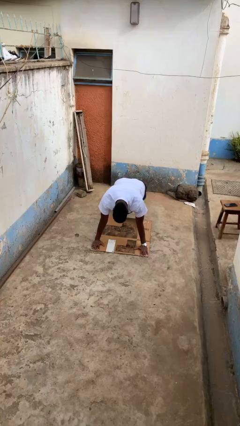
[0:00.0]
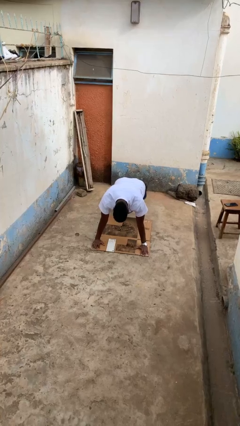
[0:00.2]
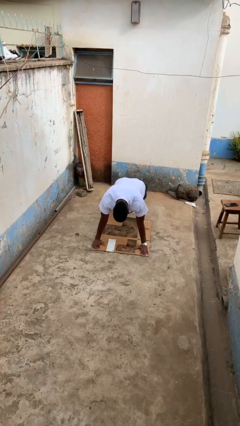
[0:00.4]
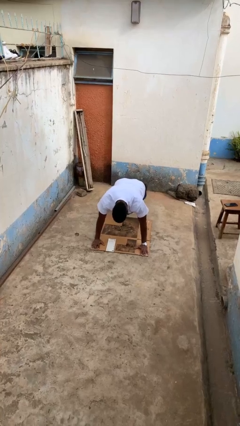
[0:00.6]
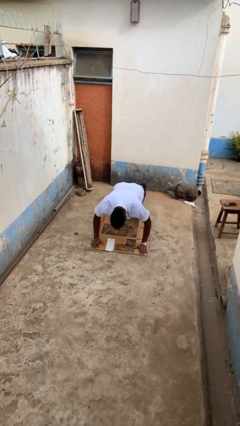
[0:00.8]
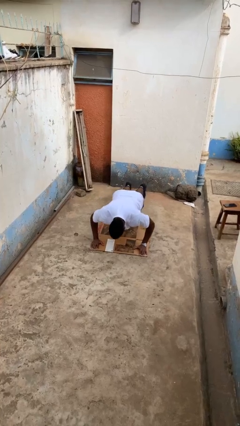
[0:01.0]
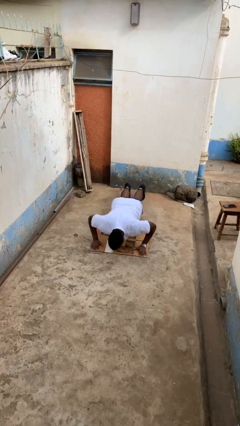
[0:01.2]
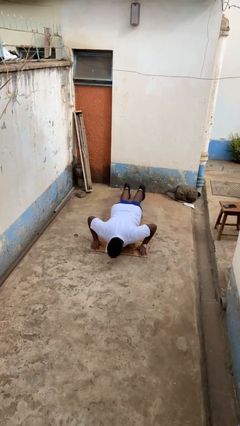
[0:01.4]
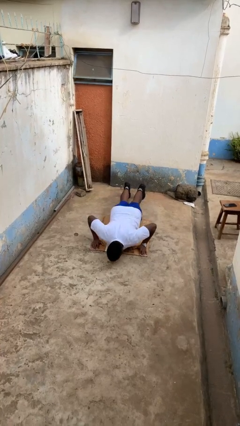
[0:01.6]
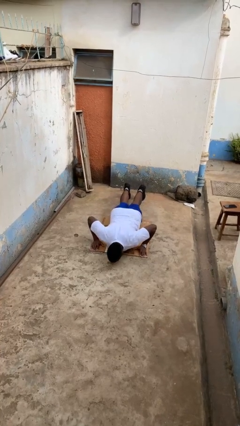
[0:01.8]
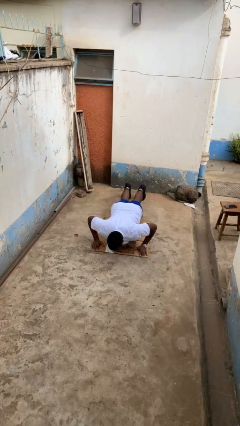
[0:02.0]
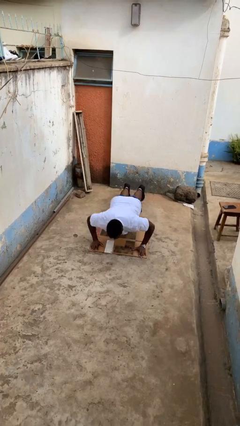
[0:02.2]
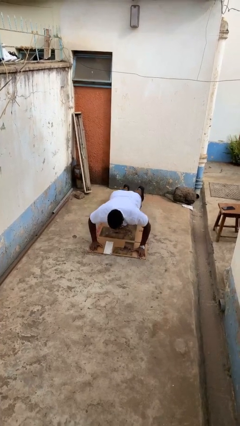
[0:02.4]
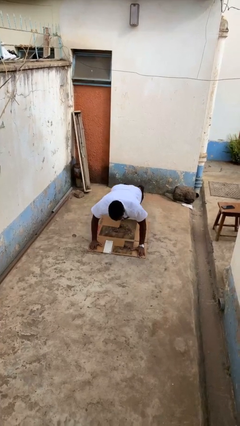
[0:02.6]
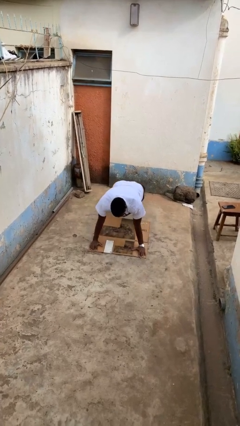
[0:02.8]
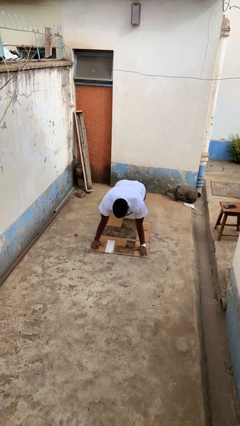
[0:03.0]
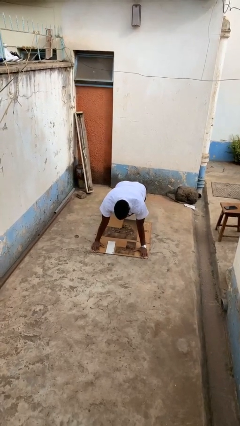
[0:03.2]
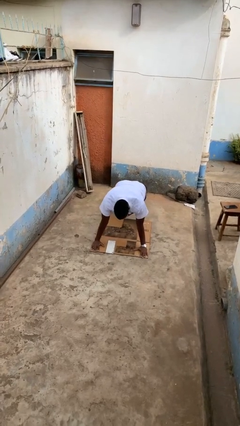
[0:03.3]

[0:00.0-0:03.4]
person exercises with pushup

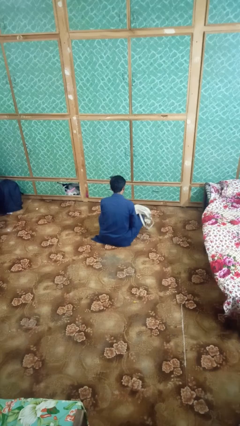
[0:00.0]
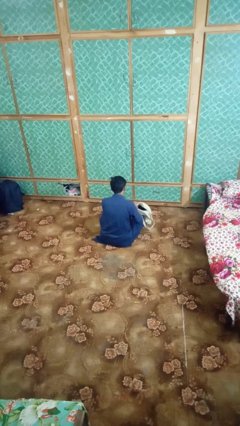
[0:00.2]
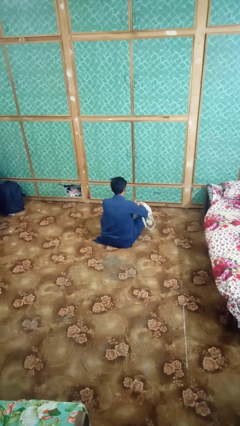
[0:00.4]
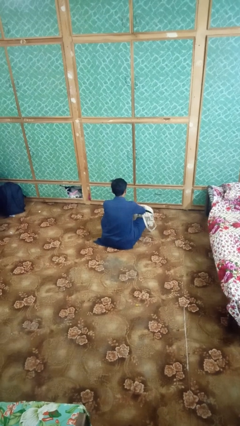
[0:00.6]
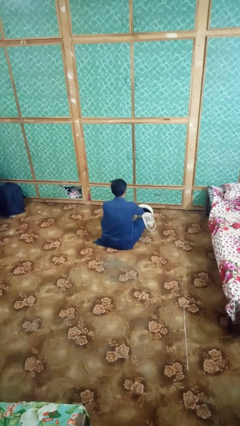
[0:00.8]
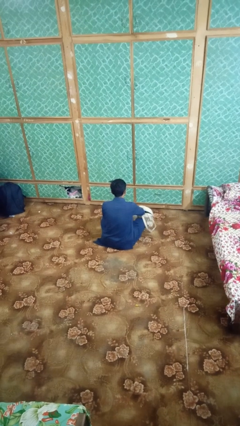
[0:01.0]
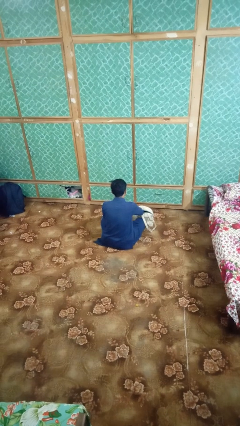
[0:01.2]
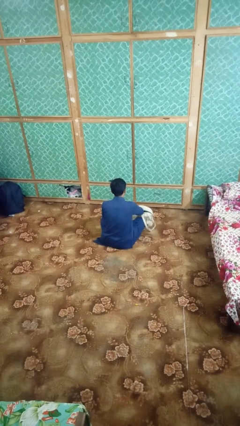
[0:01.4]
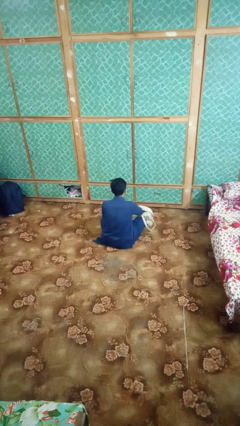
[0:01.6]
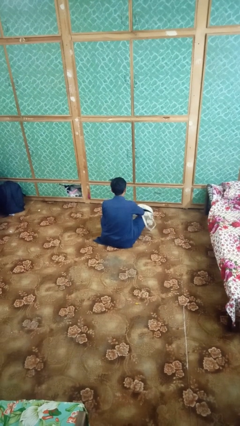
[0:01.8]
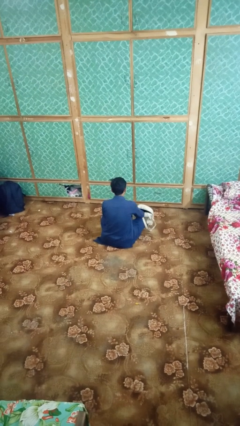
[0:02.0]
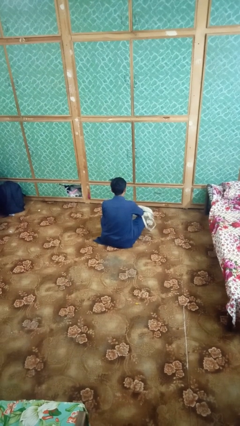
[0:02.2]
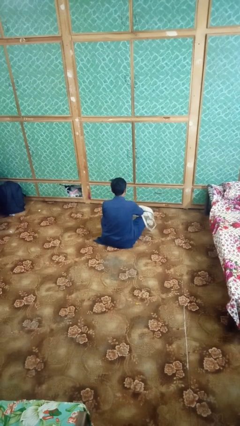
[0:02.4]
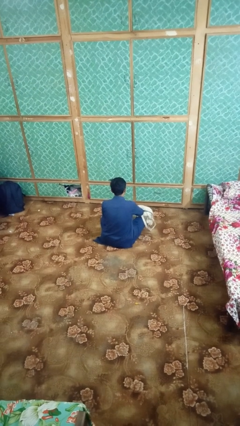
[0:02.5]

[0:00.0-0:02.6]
person searches in bag

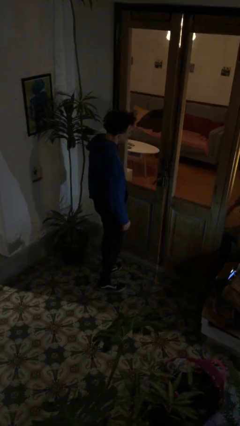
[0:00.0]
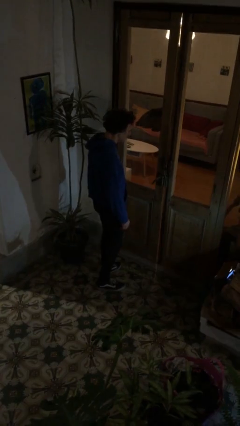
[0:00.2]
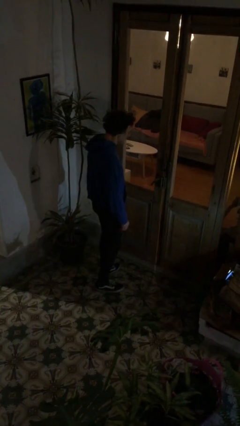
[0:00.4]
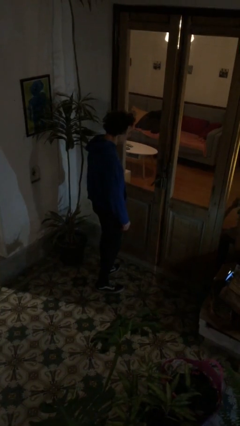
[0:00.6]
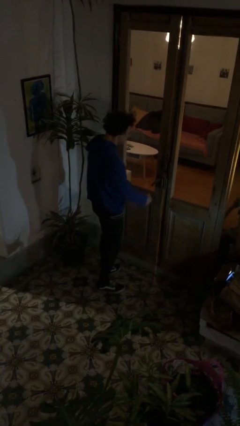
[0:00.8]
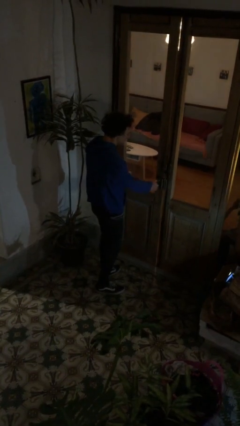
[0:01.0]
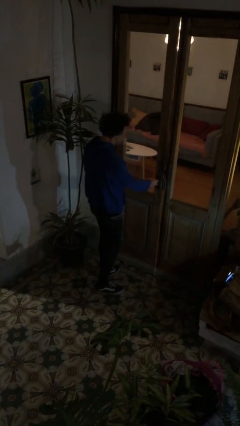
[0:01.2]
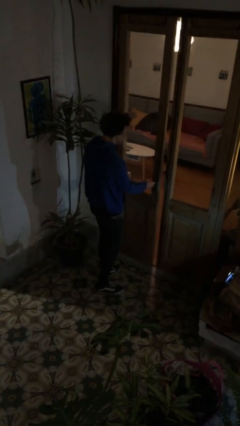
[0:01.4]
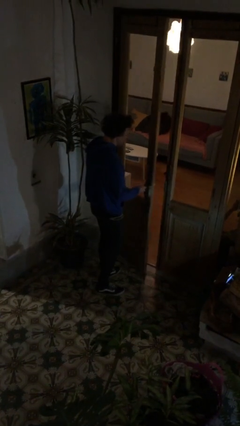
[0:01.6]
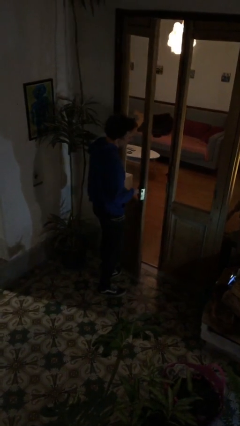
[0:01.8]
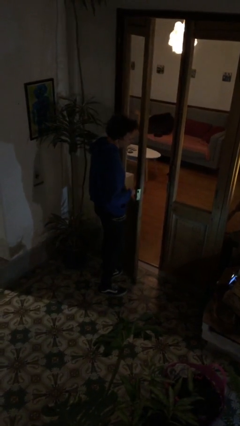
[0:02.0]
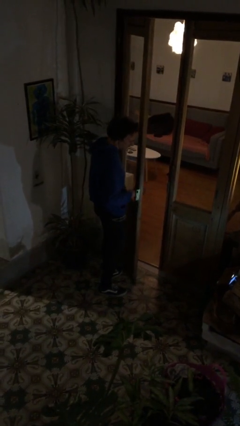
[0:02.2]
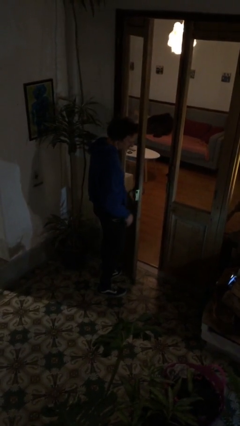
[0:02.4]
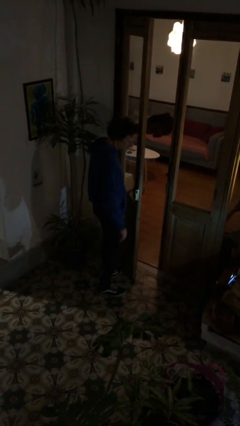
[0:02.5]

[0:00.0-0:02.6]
person opens facility door

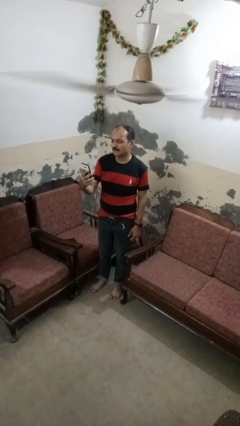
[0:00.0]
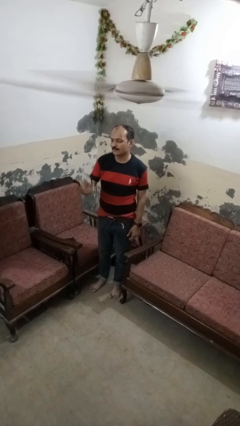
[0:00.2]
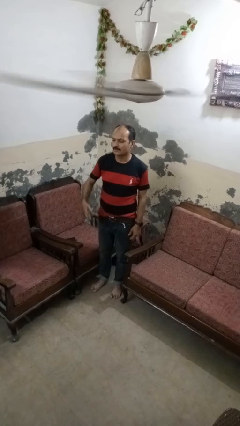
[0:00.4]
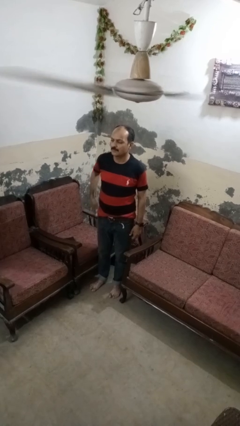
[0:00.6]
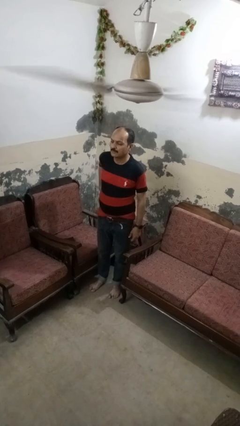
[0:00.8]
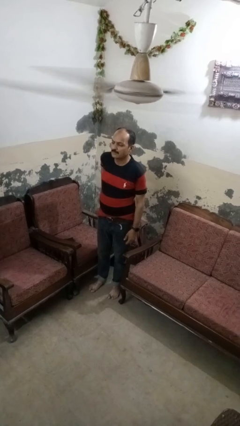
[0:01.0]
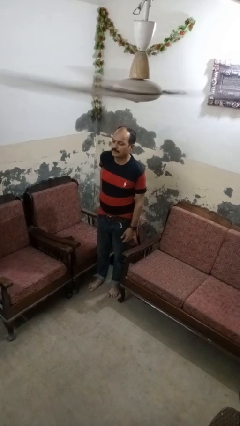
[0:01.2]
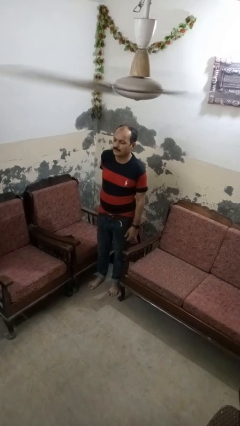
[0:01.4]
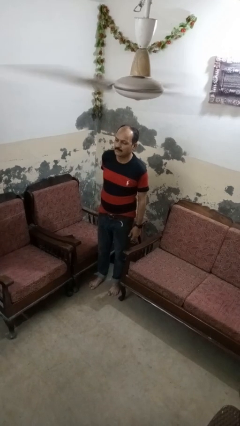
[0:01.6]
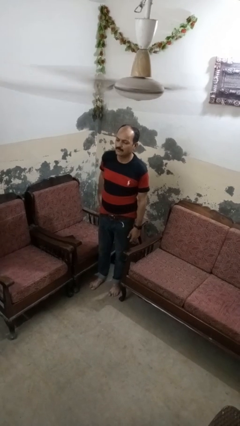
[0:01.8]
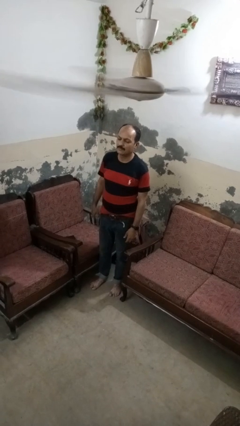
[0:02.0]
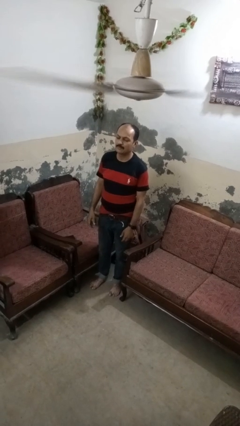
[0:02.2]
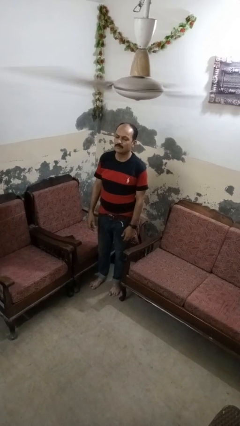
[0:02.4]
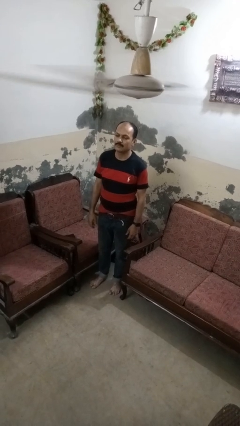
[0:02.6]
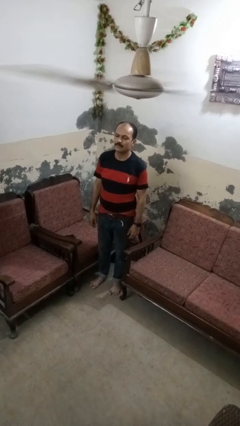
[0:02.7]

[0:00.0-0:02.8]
person puts phone into pocket

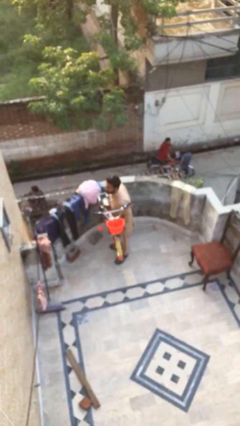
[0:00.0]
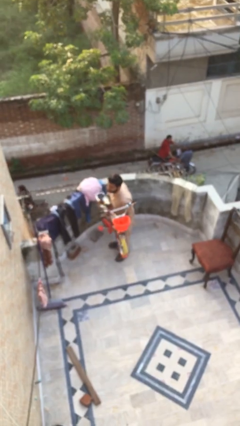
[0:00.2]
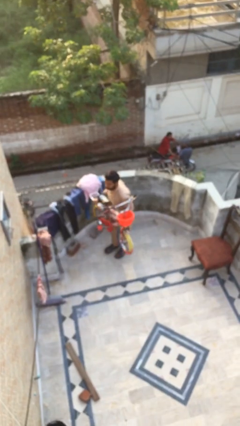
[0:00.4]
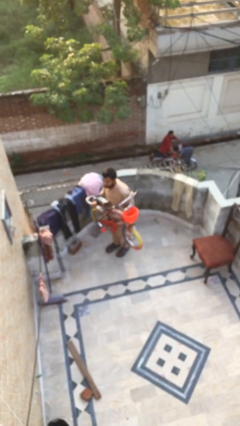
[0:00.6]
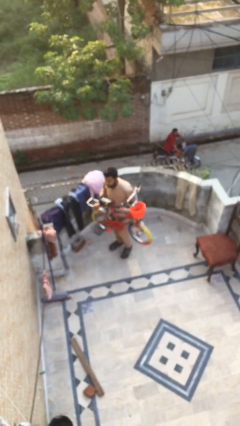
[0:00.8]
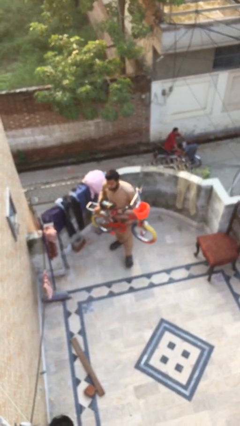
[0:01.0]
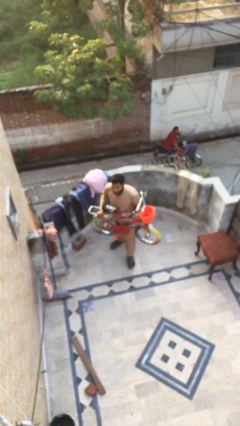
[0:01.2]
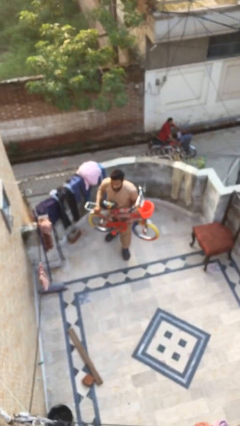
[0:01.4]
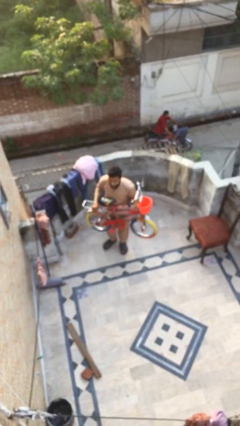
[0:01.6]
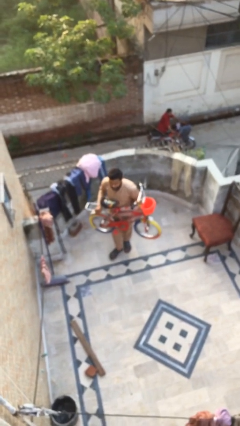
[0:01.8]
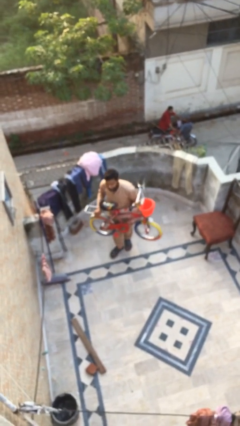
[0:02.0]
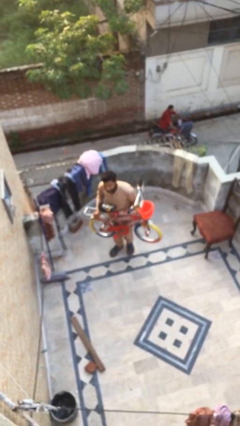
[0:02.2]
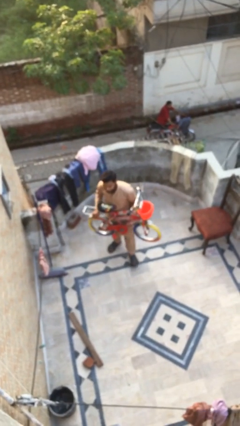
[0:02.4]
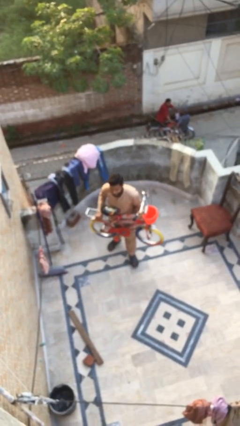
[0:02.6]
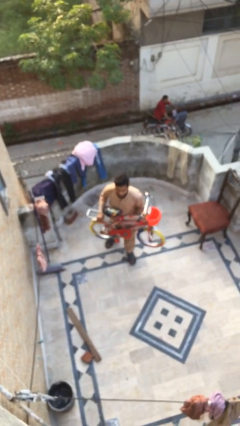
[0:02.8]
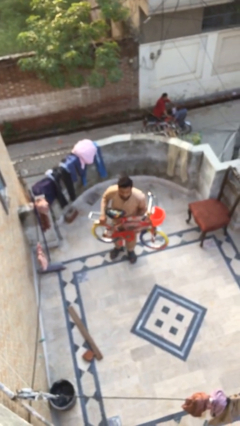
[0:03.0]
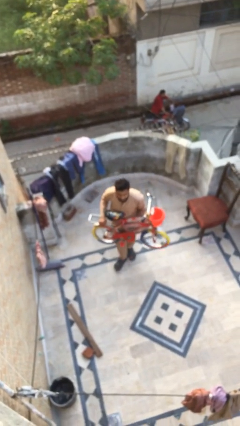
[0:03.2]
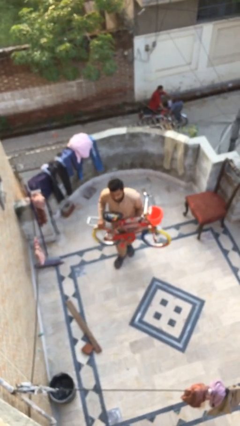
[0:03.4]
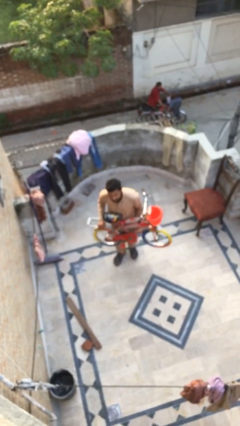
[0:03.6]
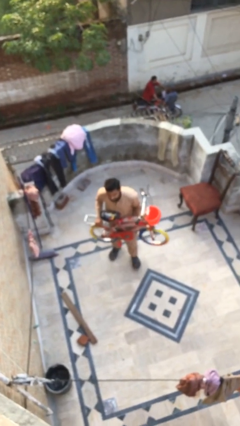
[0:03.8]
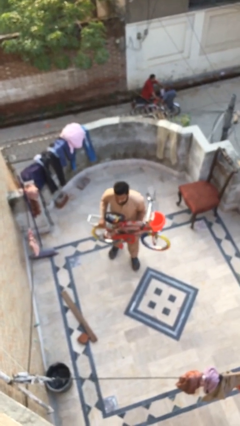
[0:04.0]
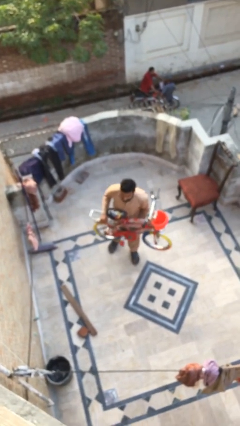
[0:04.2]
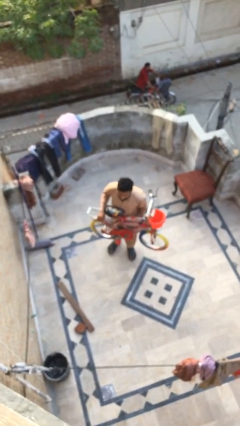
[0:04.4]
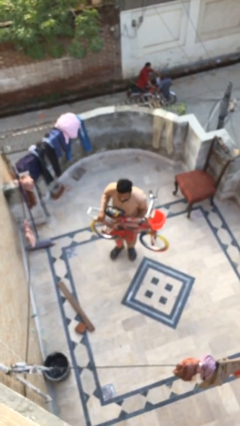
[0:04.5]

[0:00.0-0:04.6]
person carries heavy object

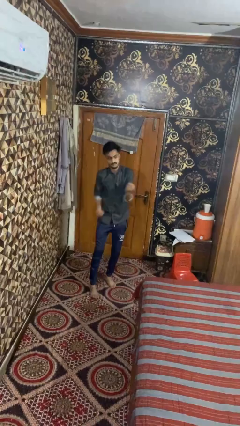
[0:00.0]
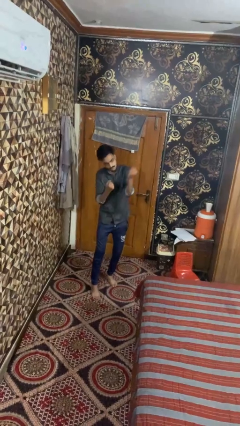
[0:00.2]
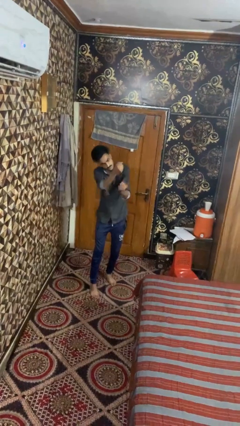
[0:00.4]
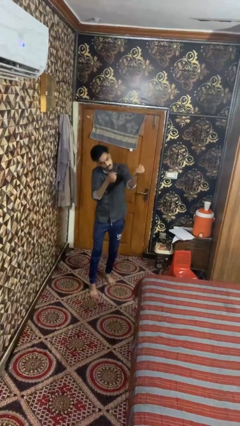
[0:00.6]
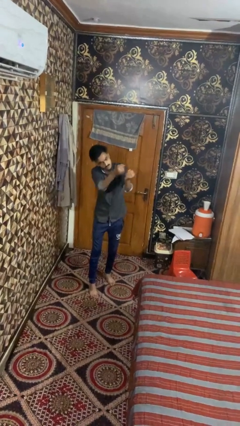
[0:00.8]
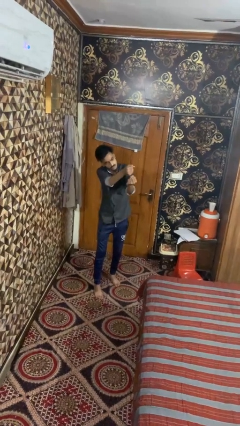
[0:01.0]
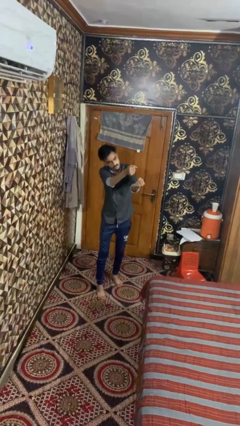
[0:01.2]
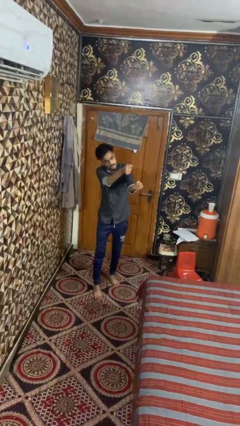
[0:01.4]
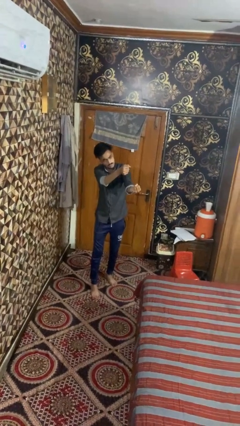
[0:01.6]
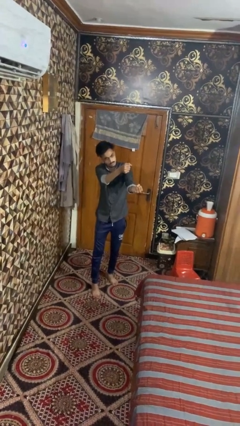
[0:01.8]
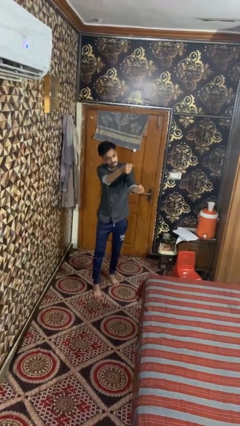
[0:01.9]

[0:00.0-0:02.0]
person punches
